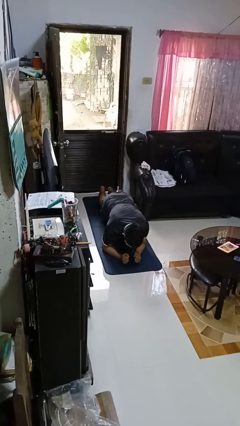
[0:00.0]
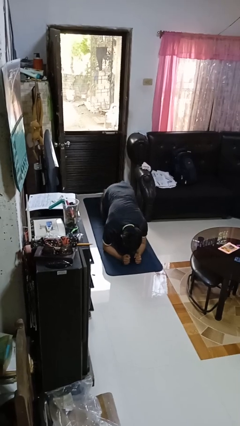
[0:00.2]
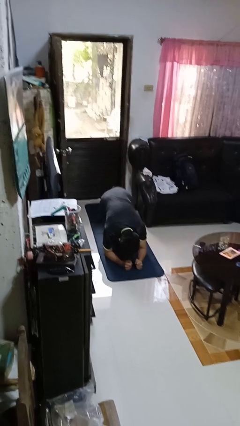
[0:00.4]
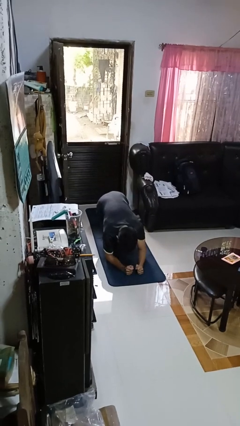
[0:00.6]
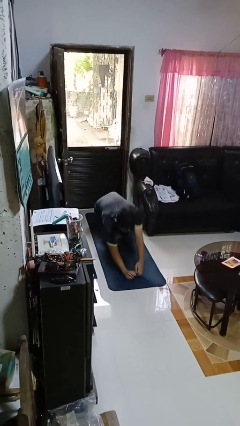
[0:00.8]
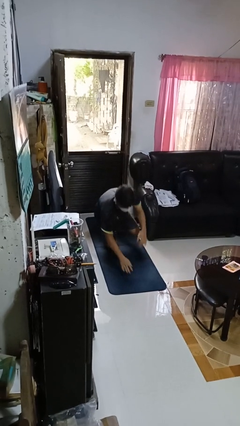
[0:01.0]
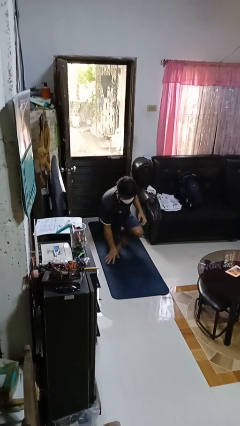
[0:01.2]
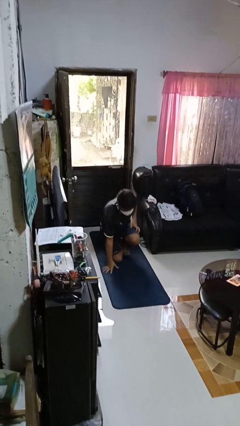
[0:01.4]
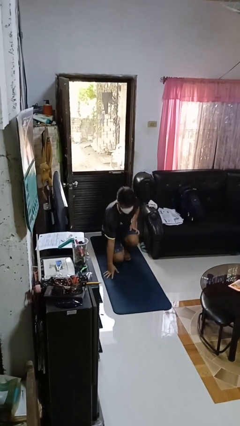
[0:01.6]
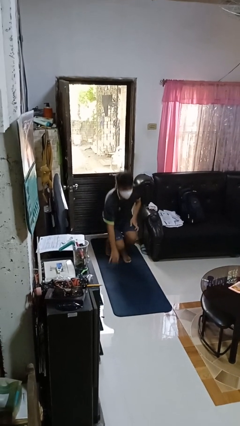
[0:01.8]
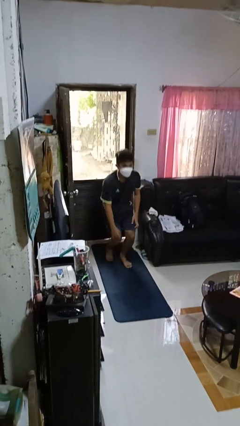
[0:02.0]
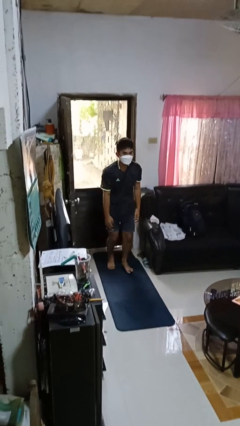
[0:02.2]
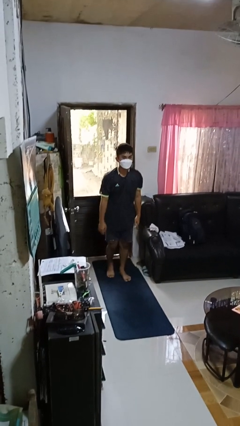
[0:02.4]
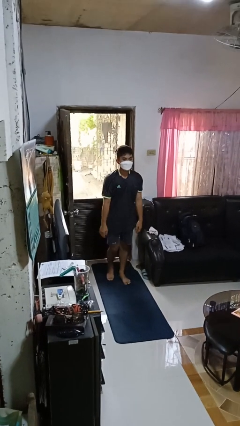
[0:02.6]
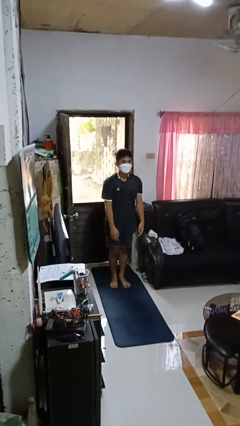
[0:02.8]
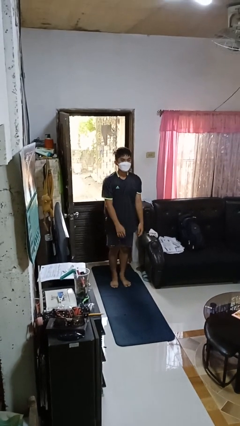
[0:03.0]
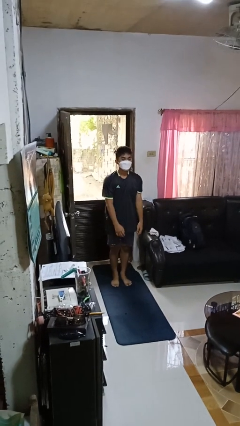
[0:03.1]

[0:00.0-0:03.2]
person stands up from floor

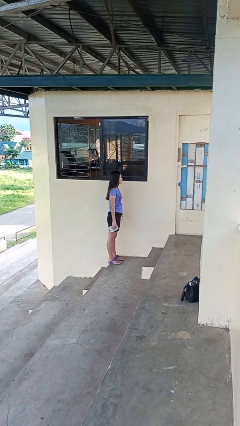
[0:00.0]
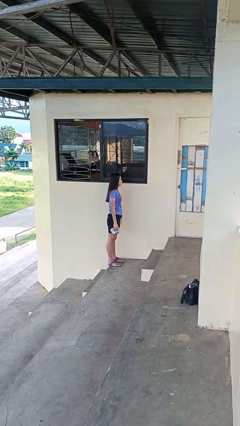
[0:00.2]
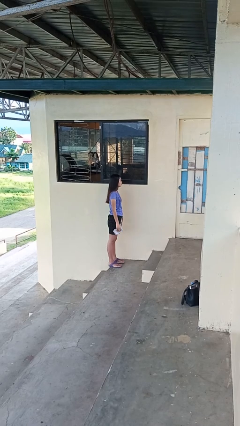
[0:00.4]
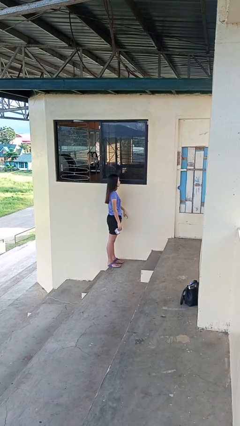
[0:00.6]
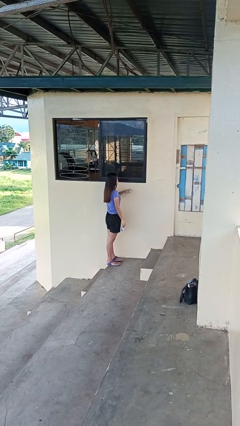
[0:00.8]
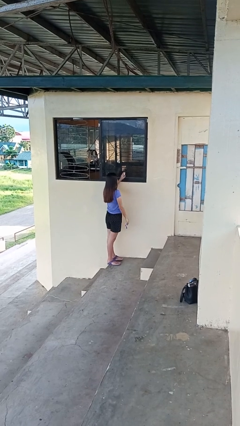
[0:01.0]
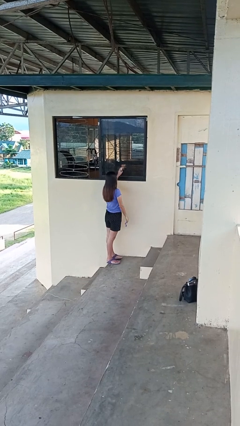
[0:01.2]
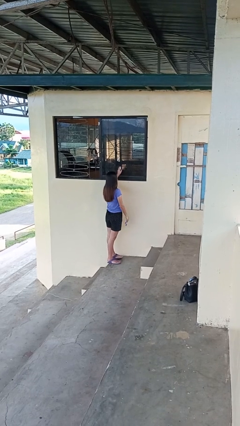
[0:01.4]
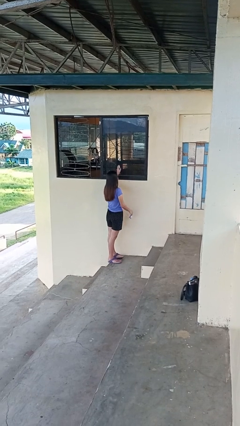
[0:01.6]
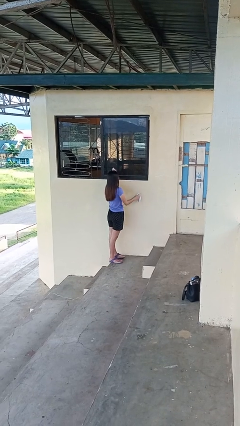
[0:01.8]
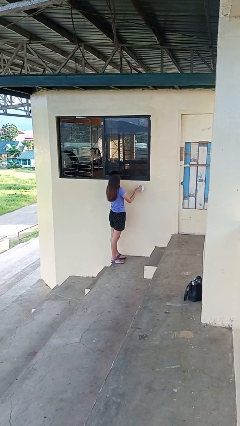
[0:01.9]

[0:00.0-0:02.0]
person sprays from bottle

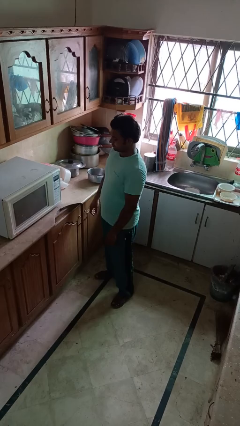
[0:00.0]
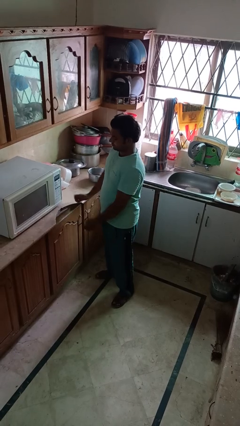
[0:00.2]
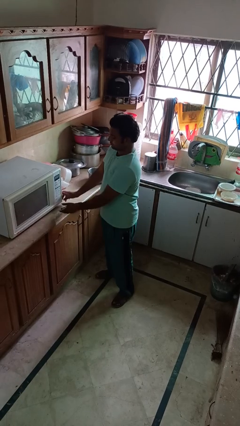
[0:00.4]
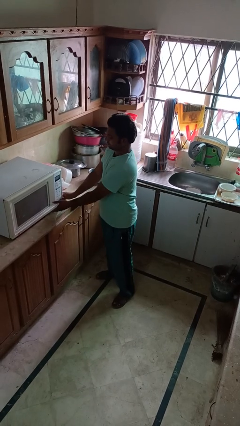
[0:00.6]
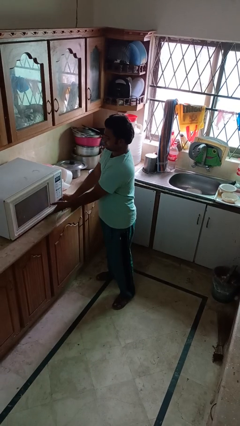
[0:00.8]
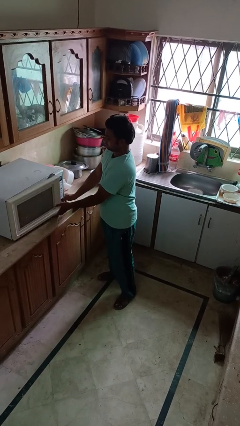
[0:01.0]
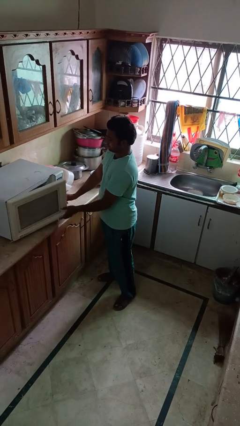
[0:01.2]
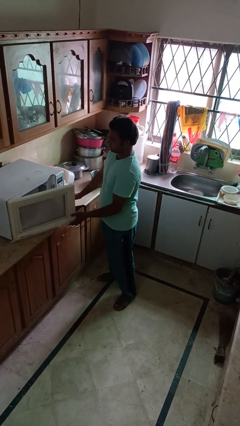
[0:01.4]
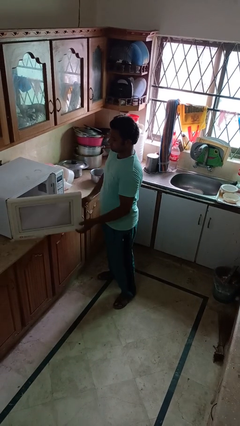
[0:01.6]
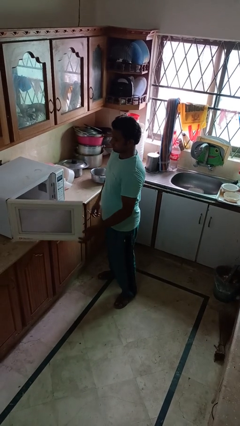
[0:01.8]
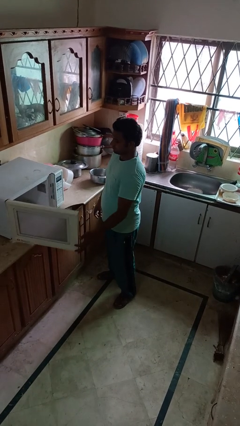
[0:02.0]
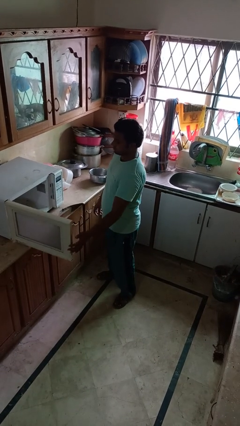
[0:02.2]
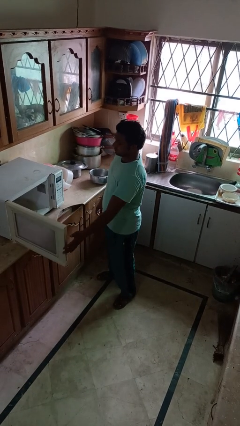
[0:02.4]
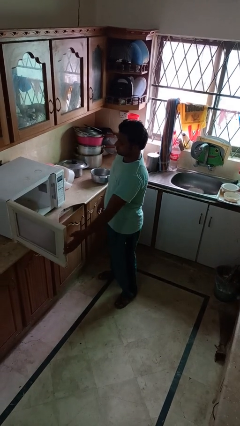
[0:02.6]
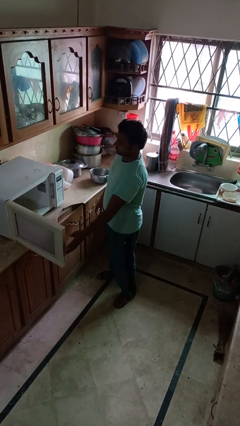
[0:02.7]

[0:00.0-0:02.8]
person opens microwave

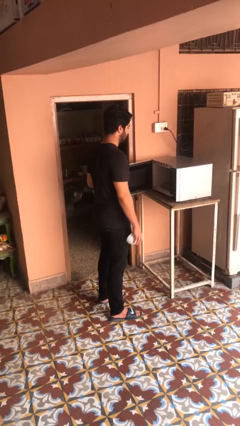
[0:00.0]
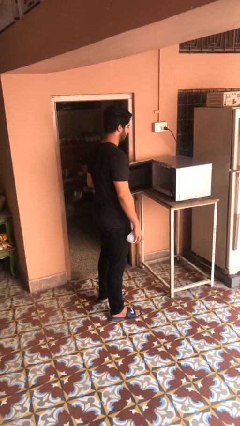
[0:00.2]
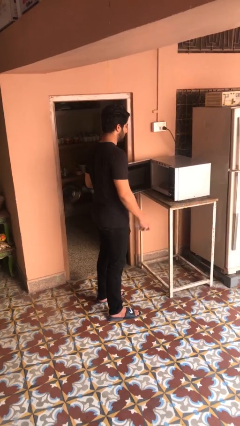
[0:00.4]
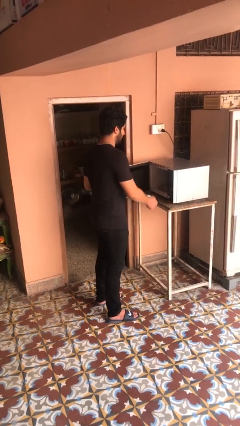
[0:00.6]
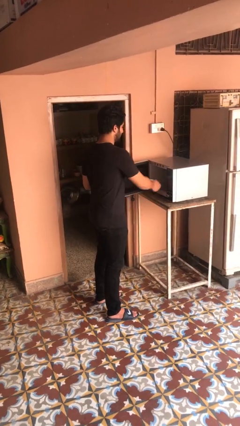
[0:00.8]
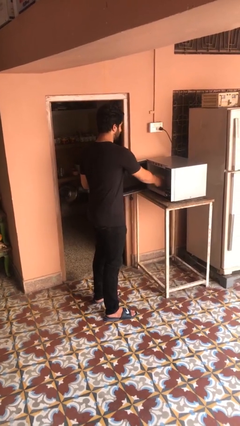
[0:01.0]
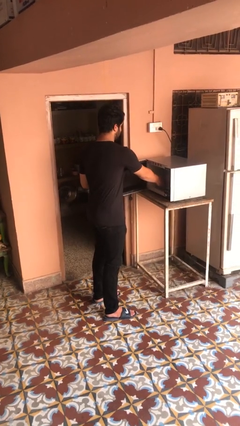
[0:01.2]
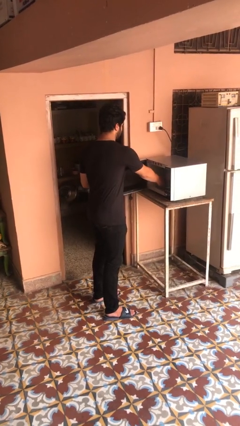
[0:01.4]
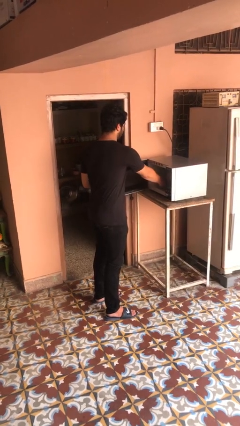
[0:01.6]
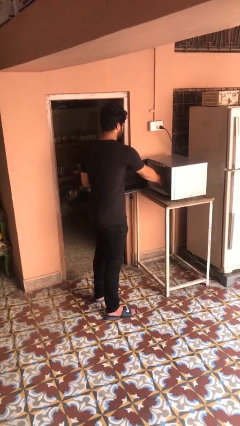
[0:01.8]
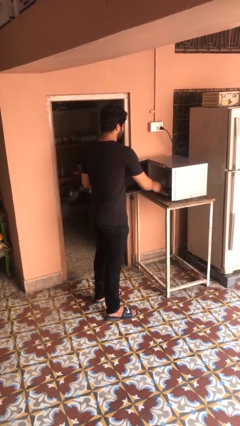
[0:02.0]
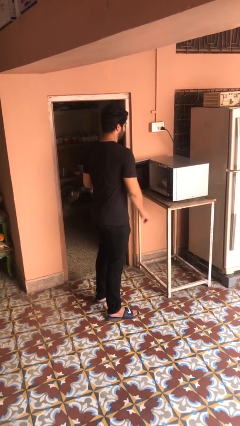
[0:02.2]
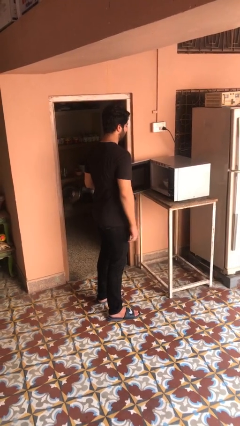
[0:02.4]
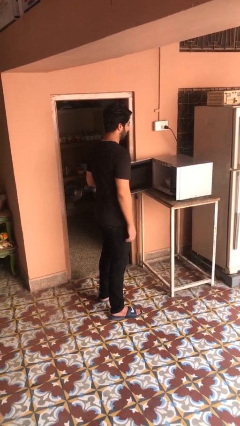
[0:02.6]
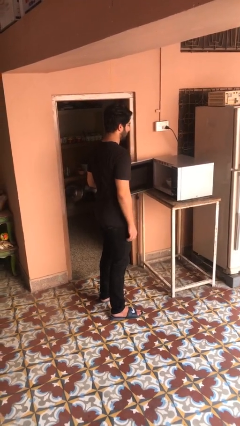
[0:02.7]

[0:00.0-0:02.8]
person puts object into microwave

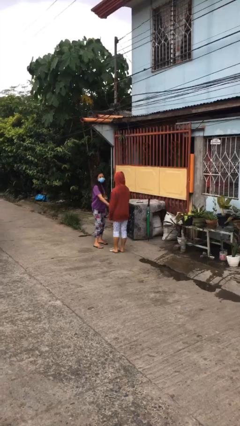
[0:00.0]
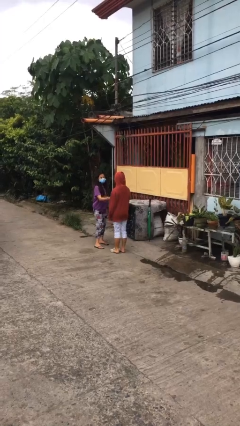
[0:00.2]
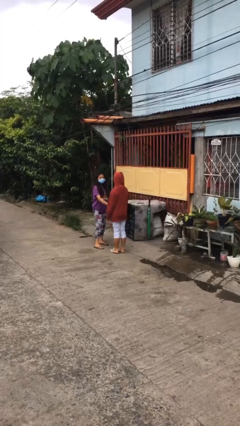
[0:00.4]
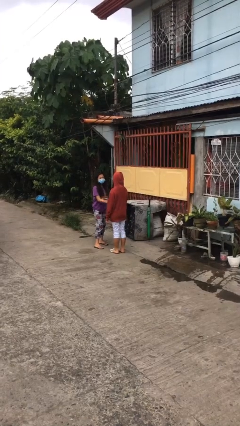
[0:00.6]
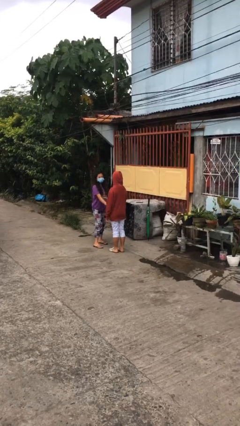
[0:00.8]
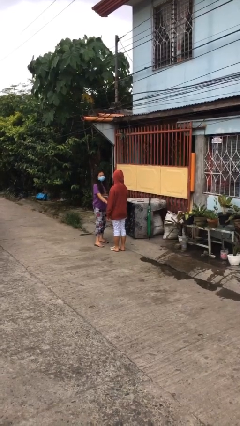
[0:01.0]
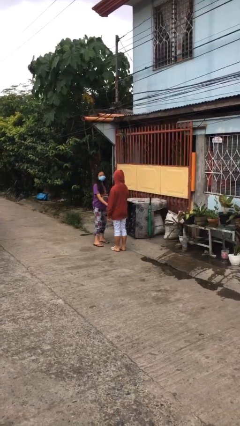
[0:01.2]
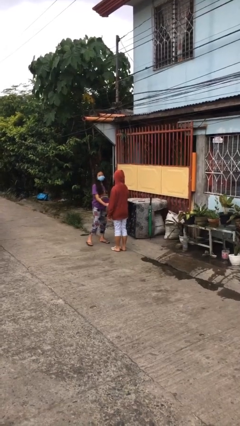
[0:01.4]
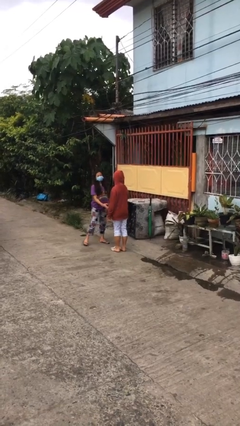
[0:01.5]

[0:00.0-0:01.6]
person shakes hand

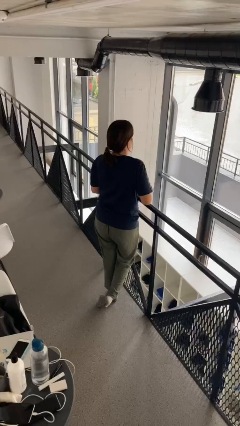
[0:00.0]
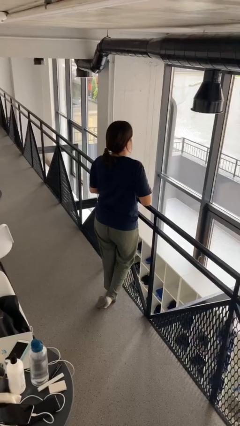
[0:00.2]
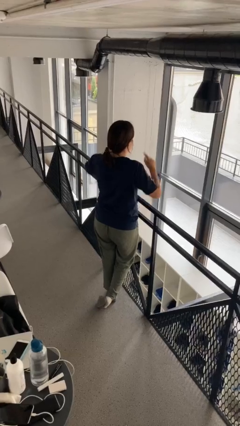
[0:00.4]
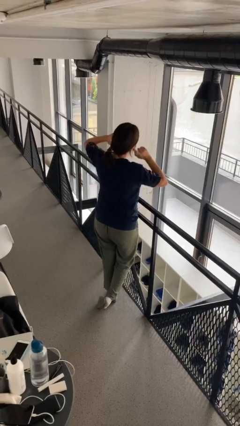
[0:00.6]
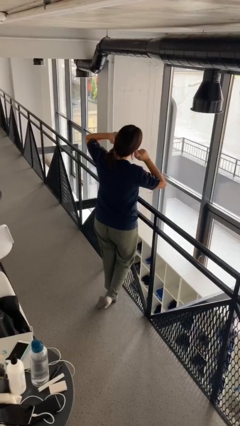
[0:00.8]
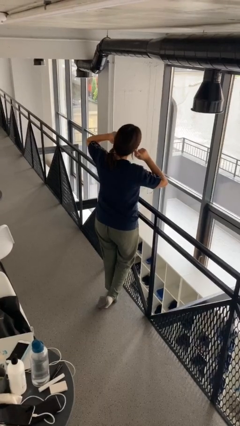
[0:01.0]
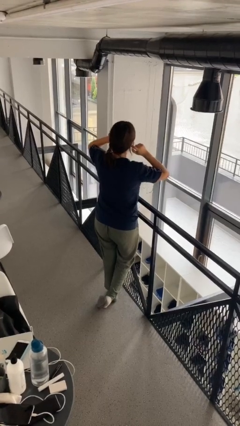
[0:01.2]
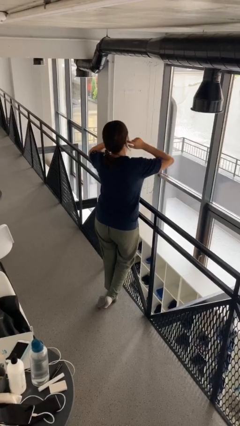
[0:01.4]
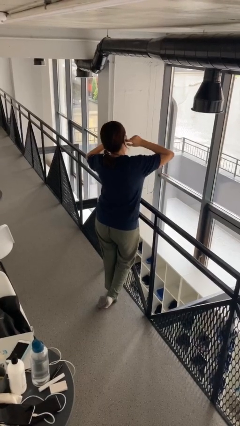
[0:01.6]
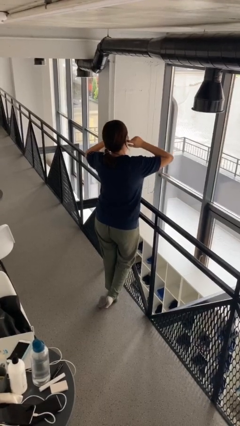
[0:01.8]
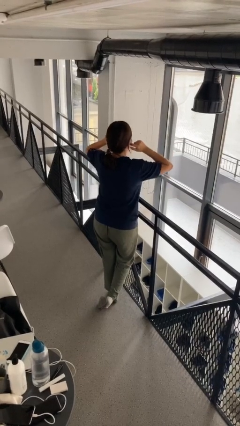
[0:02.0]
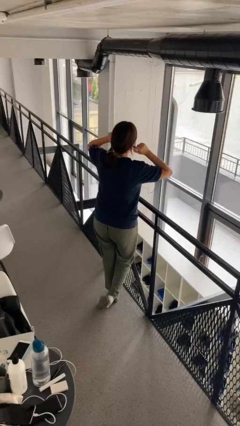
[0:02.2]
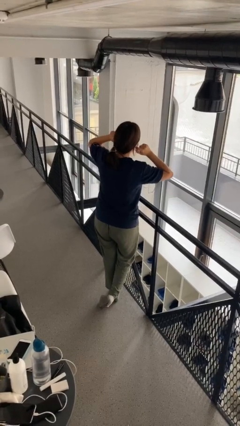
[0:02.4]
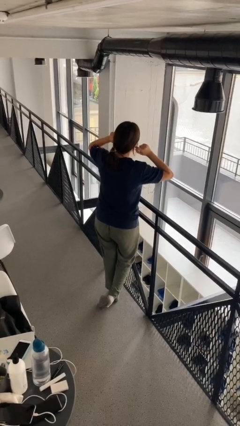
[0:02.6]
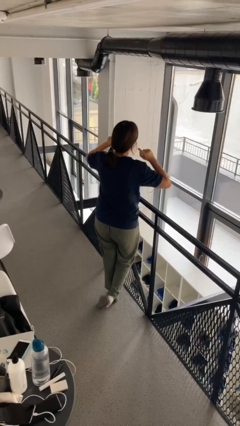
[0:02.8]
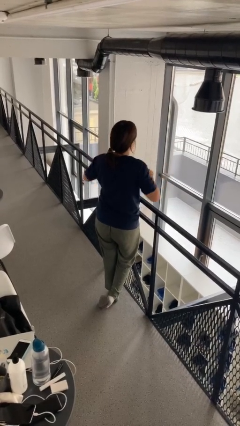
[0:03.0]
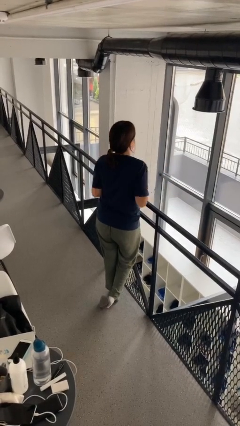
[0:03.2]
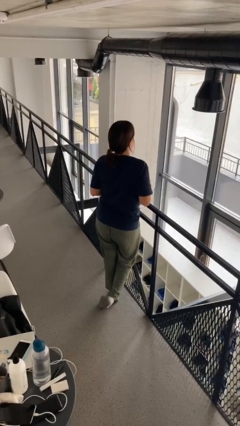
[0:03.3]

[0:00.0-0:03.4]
person puts fingers in ear

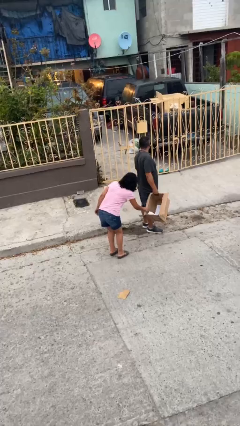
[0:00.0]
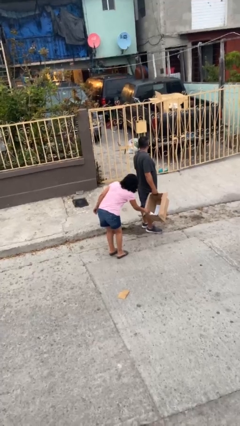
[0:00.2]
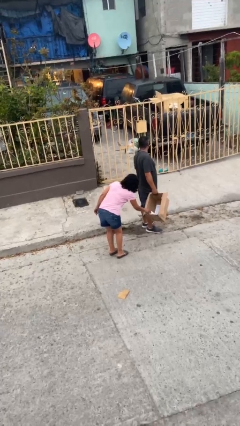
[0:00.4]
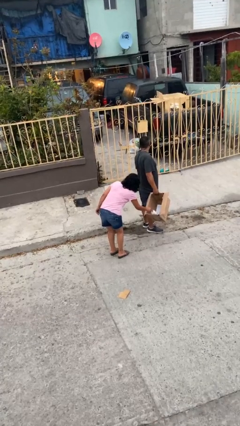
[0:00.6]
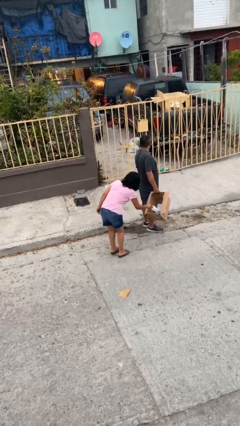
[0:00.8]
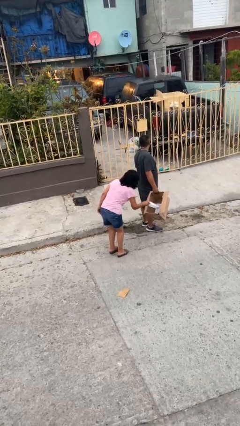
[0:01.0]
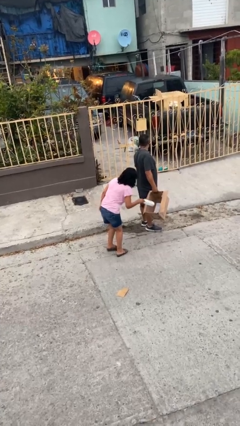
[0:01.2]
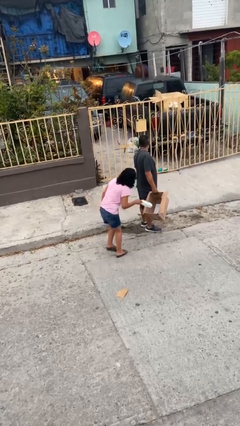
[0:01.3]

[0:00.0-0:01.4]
person steals object from person
